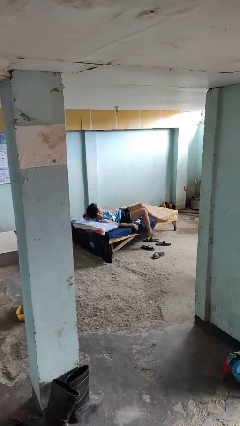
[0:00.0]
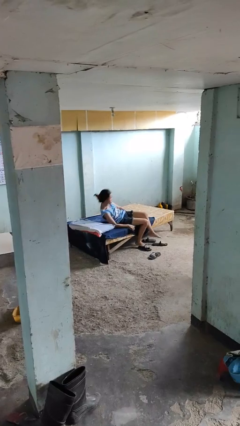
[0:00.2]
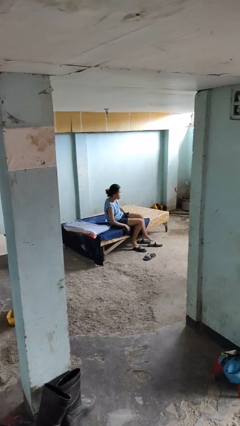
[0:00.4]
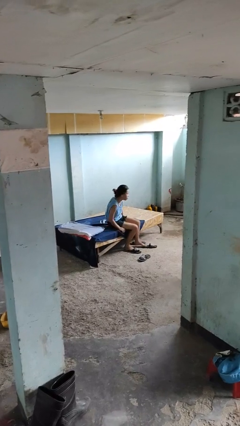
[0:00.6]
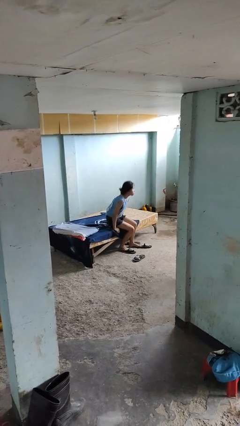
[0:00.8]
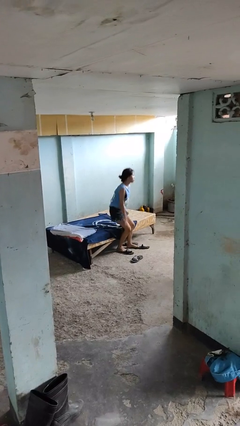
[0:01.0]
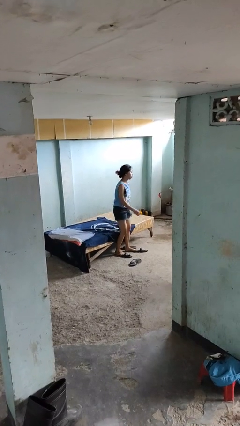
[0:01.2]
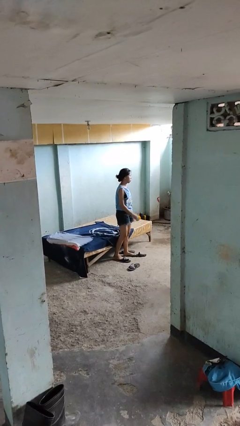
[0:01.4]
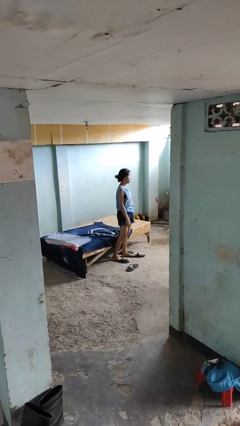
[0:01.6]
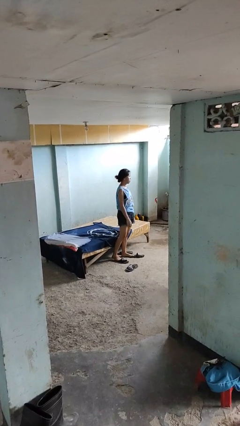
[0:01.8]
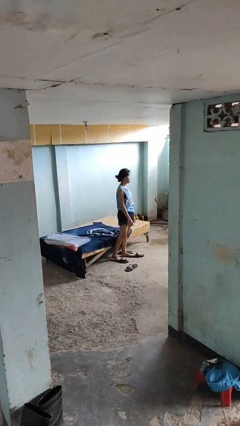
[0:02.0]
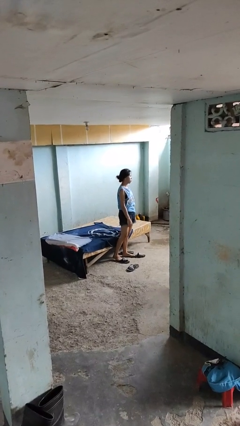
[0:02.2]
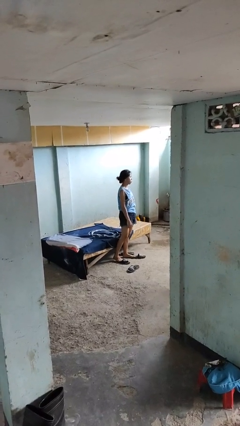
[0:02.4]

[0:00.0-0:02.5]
person stands up

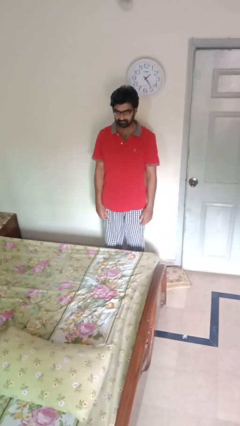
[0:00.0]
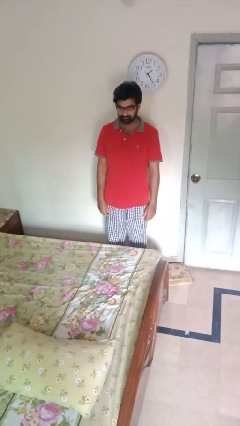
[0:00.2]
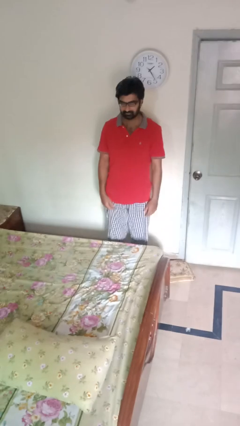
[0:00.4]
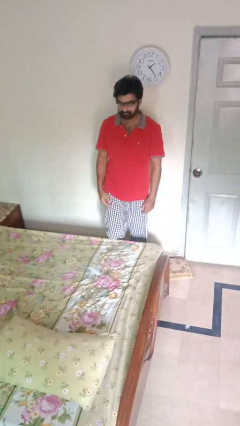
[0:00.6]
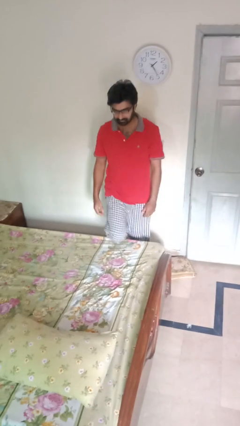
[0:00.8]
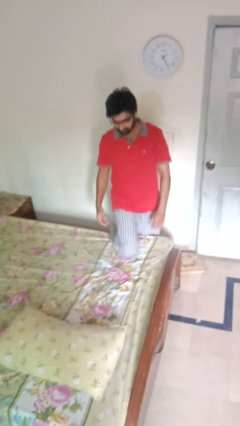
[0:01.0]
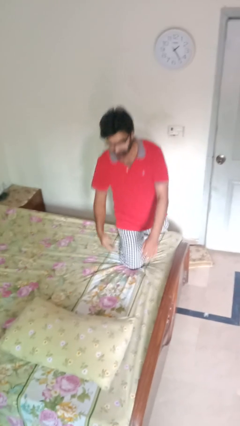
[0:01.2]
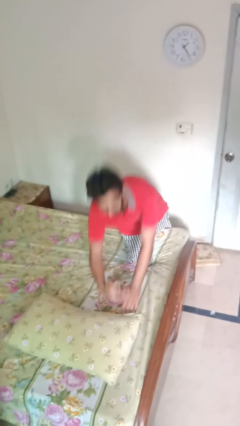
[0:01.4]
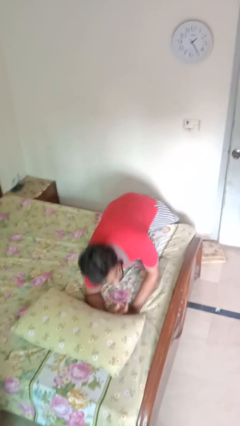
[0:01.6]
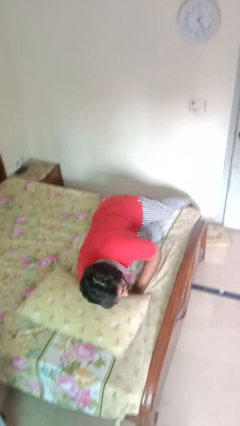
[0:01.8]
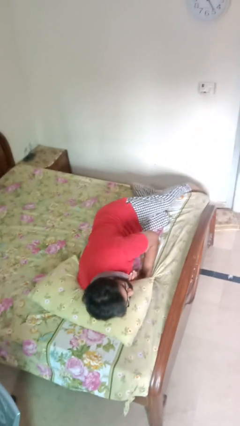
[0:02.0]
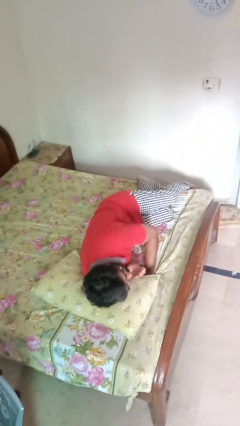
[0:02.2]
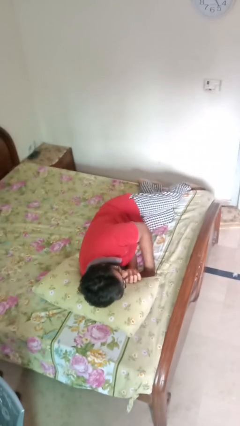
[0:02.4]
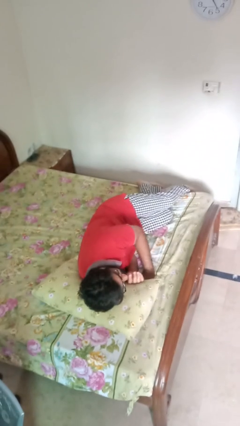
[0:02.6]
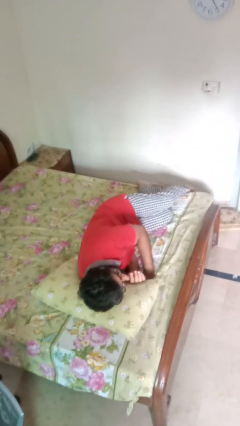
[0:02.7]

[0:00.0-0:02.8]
person lies down on bed

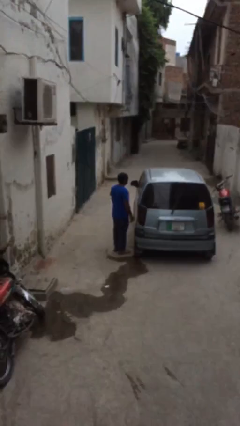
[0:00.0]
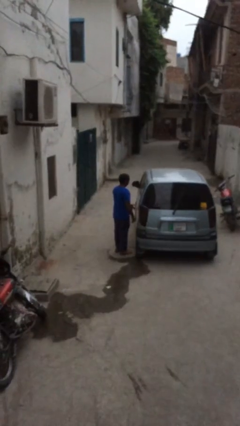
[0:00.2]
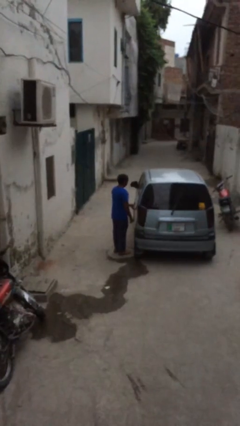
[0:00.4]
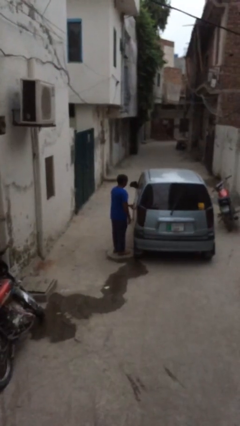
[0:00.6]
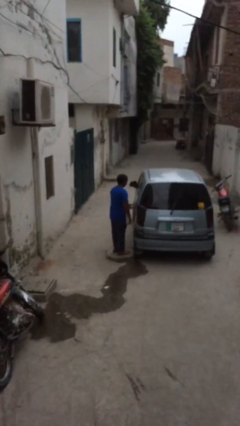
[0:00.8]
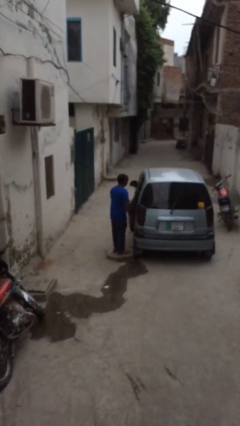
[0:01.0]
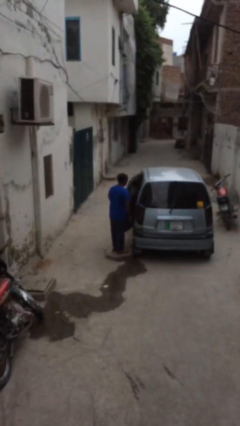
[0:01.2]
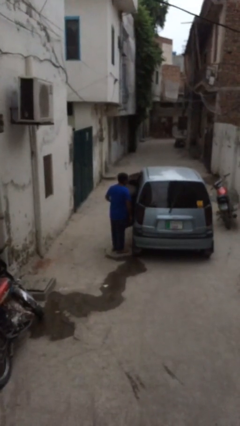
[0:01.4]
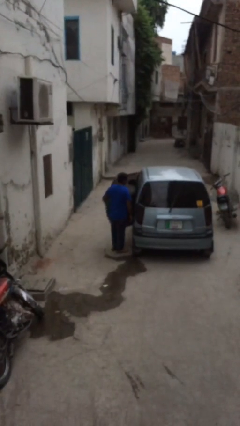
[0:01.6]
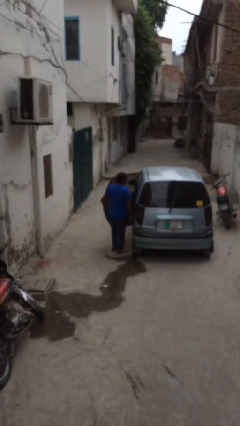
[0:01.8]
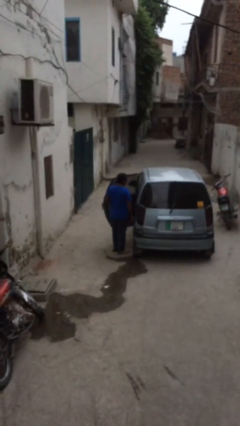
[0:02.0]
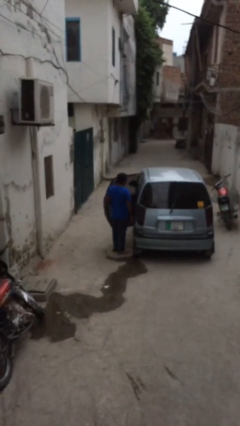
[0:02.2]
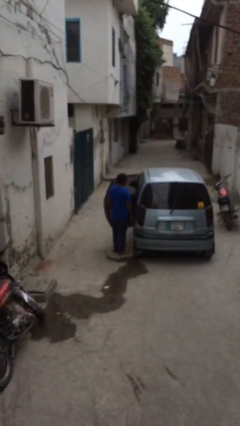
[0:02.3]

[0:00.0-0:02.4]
person opens car door

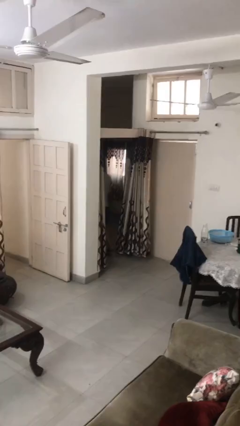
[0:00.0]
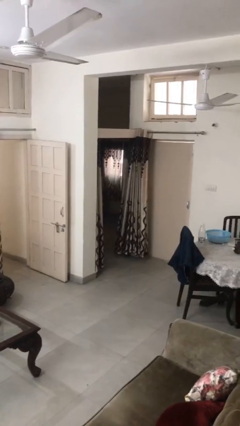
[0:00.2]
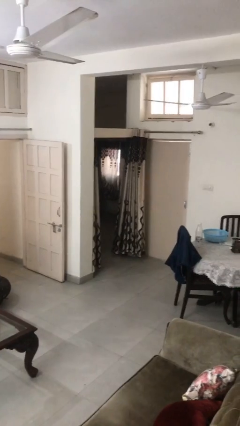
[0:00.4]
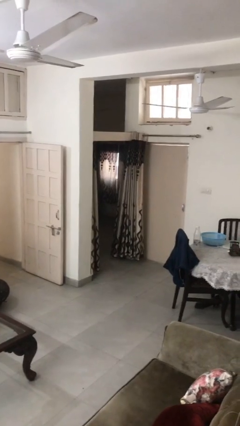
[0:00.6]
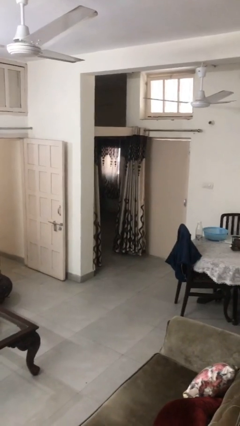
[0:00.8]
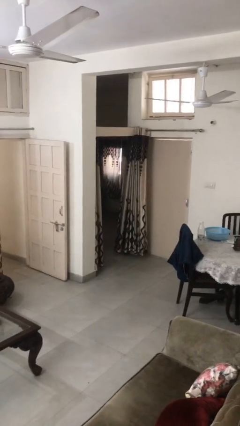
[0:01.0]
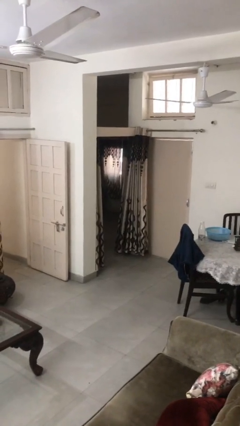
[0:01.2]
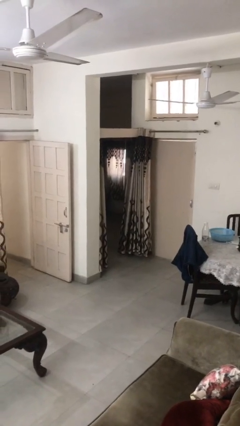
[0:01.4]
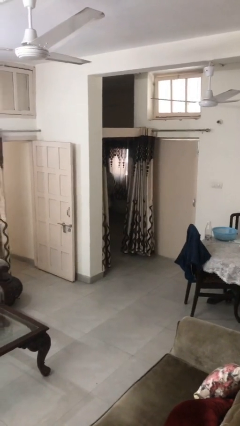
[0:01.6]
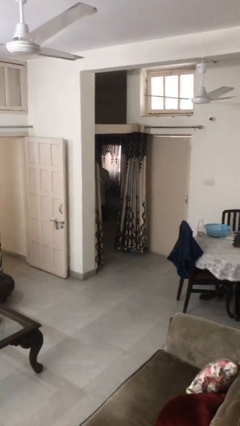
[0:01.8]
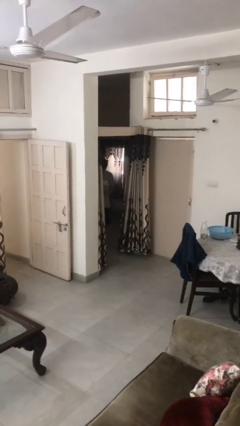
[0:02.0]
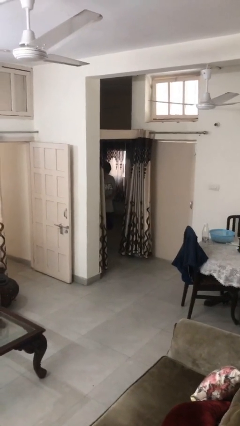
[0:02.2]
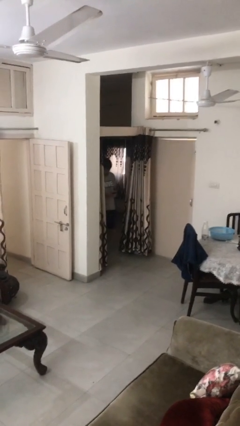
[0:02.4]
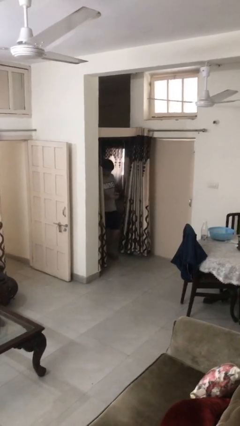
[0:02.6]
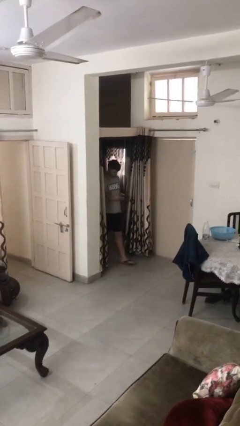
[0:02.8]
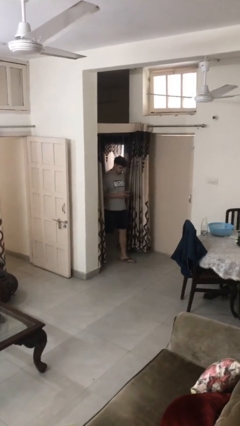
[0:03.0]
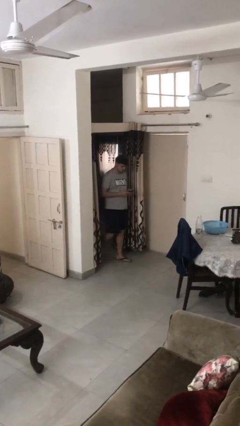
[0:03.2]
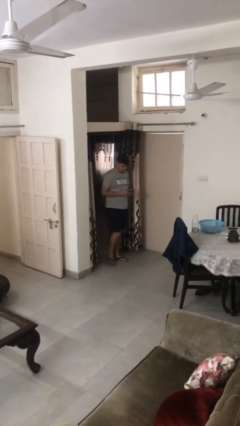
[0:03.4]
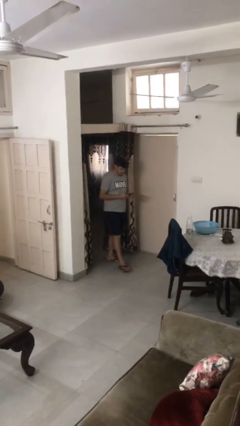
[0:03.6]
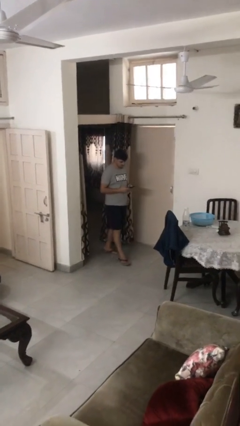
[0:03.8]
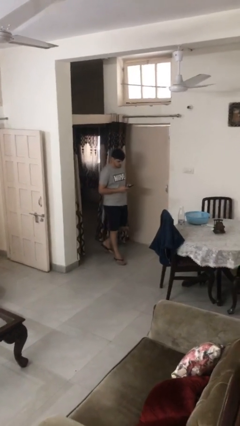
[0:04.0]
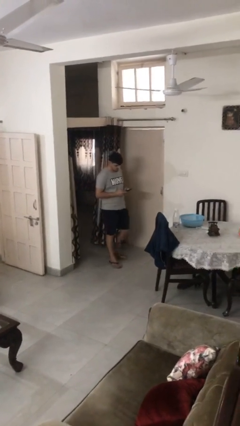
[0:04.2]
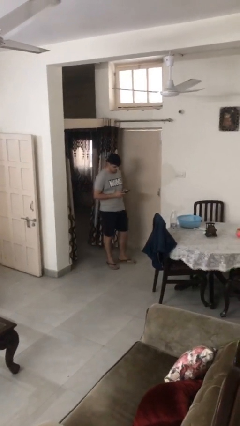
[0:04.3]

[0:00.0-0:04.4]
person enters scene through structure

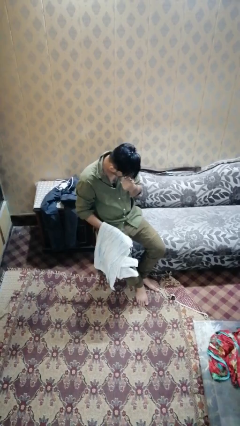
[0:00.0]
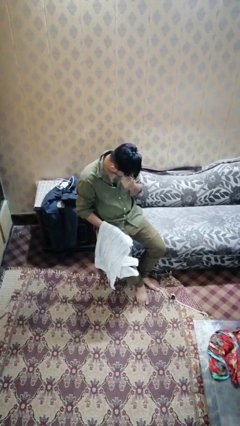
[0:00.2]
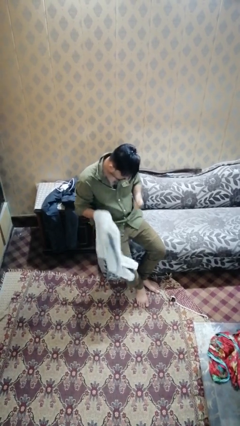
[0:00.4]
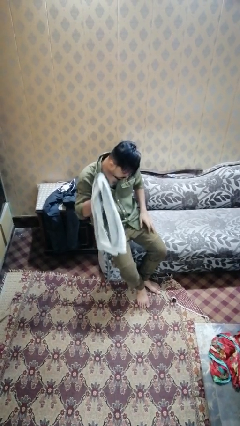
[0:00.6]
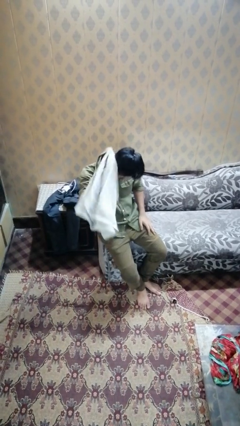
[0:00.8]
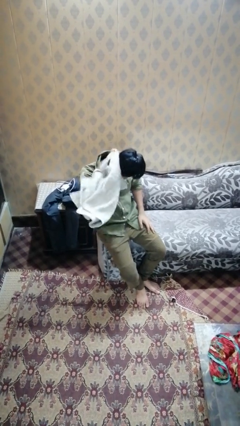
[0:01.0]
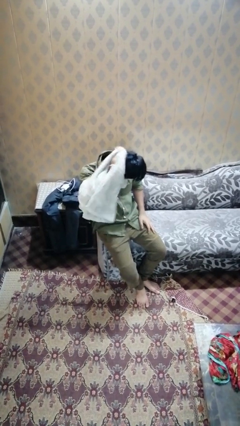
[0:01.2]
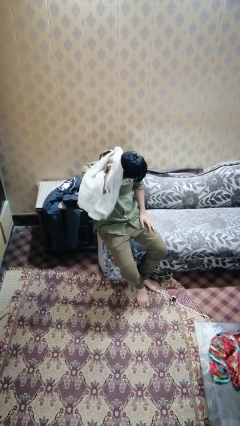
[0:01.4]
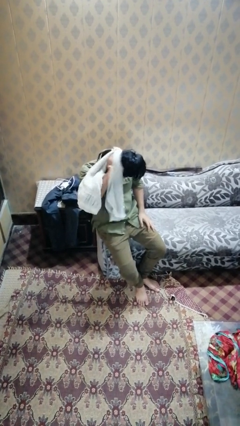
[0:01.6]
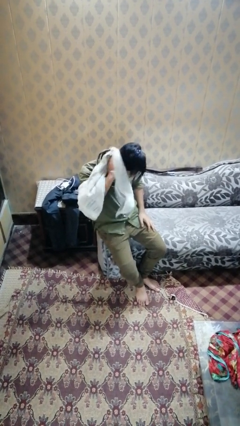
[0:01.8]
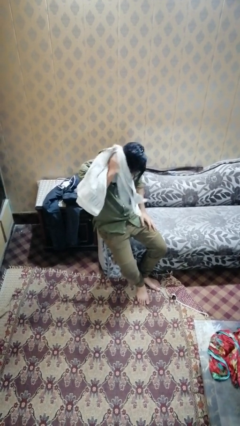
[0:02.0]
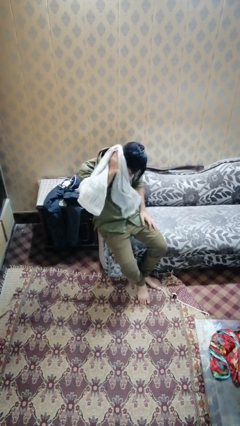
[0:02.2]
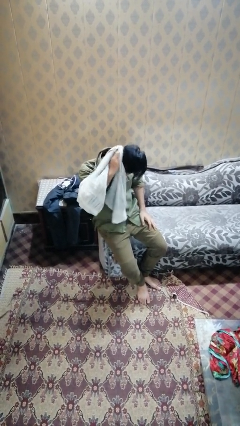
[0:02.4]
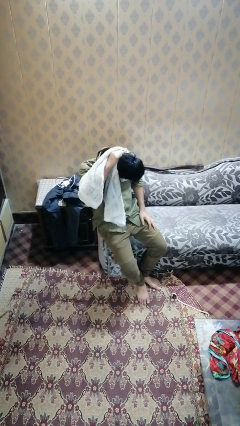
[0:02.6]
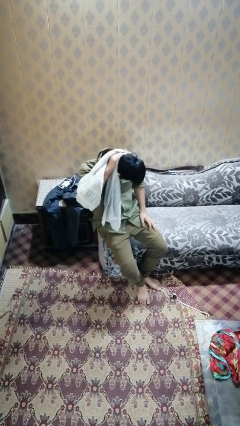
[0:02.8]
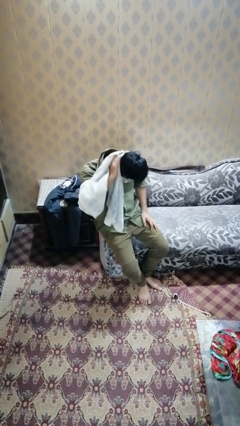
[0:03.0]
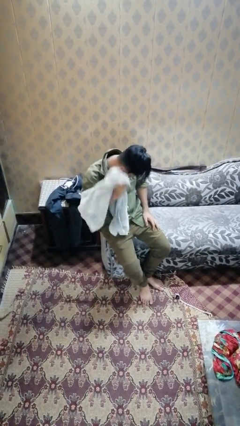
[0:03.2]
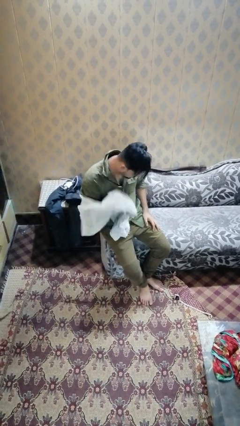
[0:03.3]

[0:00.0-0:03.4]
person dries hair with towel

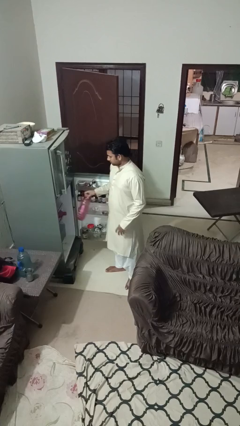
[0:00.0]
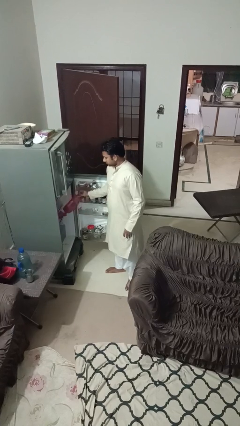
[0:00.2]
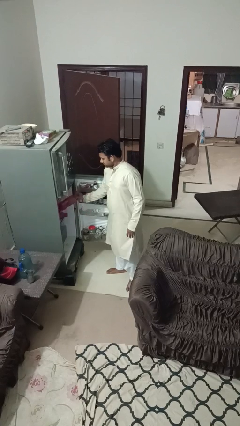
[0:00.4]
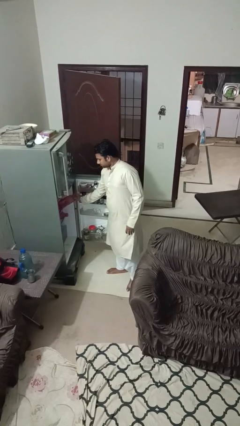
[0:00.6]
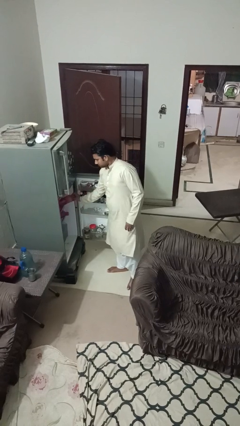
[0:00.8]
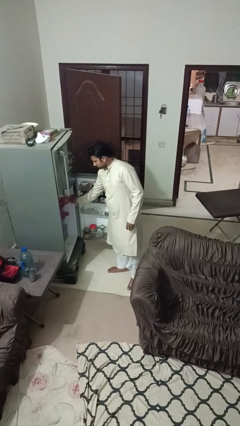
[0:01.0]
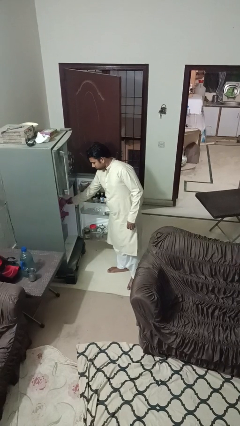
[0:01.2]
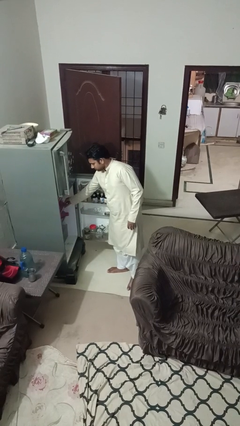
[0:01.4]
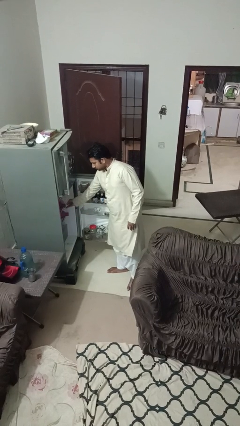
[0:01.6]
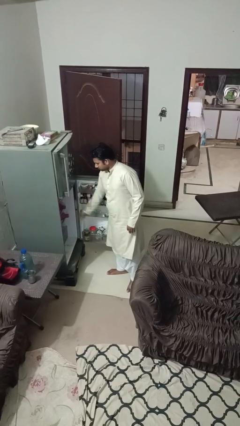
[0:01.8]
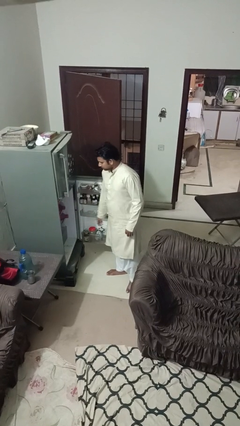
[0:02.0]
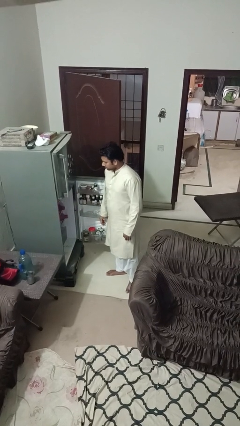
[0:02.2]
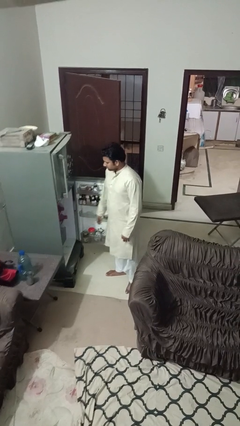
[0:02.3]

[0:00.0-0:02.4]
person puts object into refrigerator
